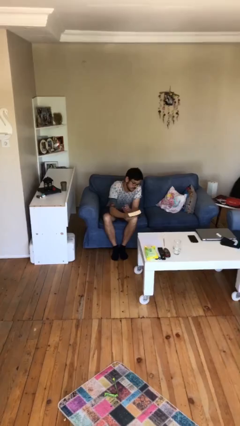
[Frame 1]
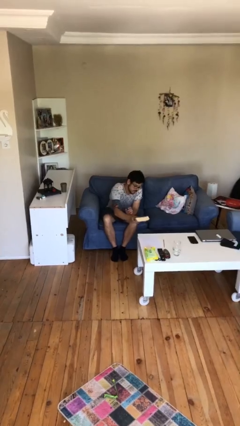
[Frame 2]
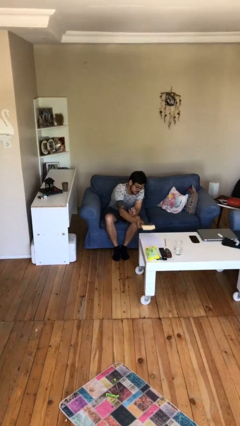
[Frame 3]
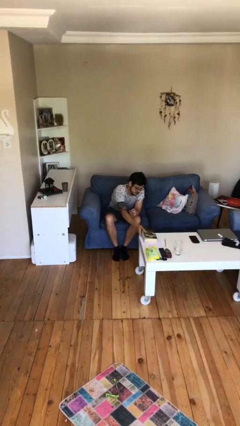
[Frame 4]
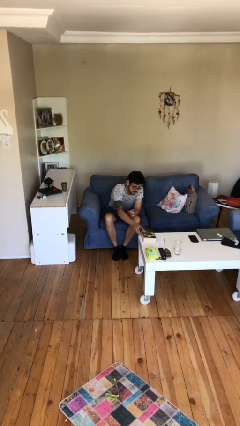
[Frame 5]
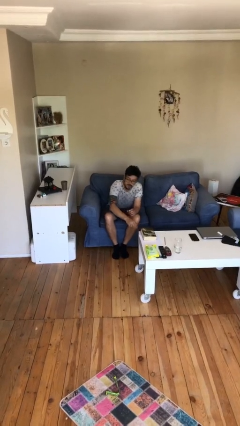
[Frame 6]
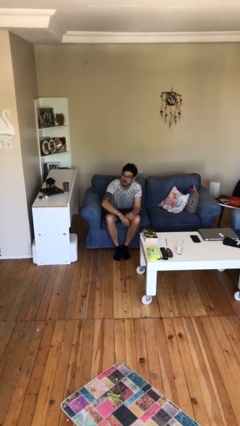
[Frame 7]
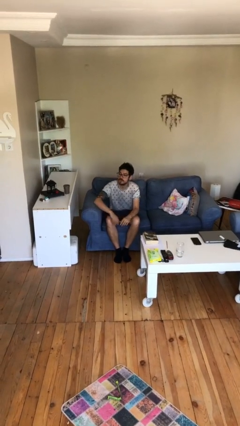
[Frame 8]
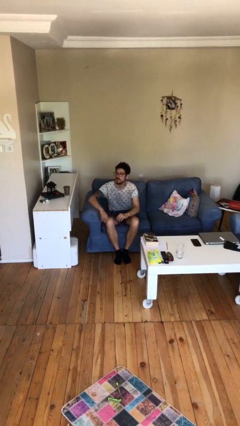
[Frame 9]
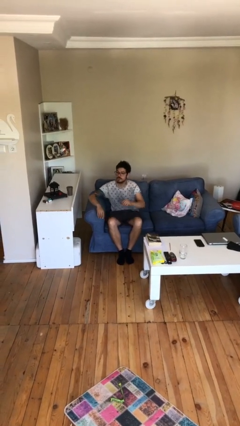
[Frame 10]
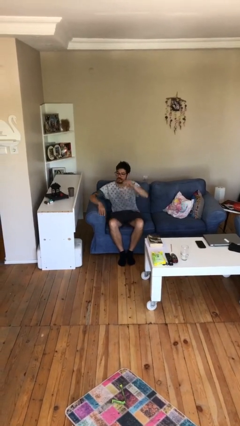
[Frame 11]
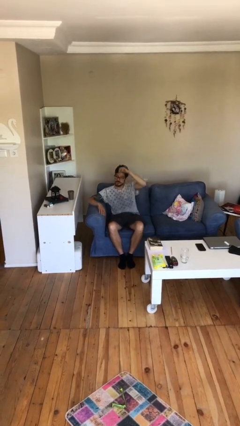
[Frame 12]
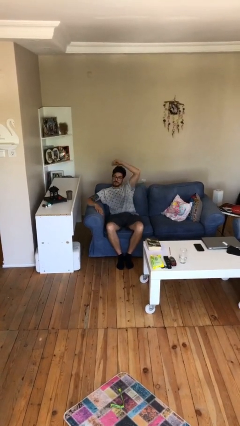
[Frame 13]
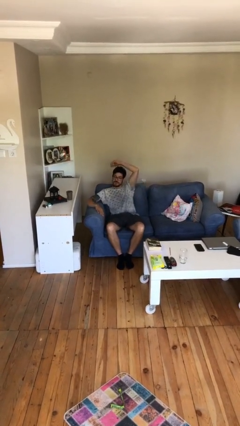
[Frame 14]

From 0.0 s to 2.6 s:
person puts down object on table

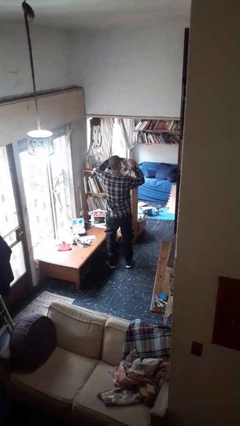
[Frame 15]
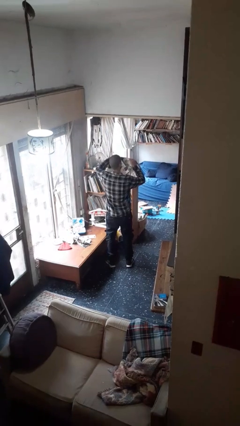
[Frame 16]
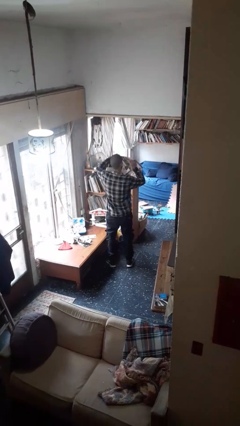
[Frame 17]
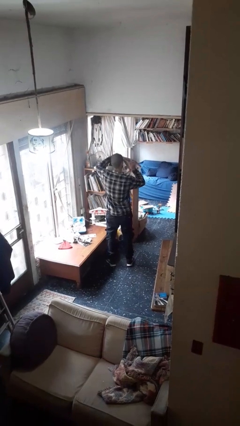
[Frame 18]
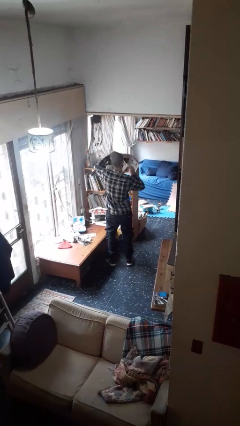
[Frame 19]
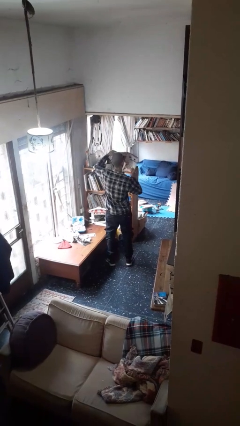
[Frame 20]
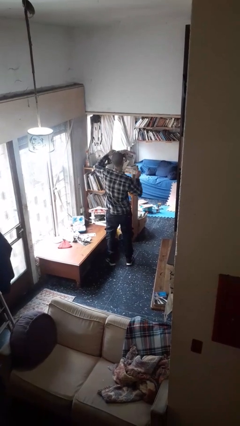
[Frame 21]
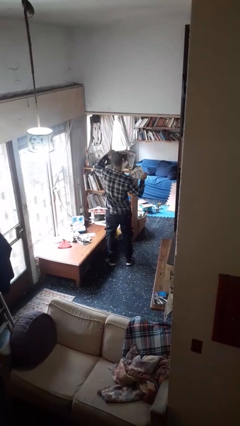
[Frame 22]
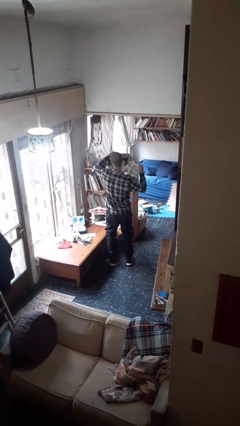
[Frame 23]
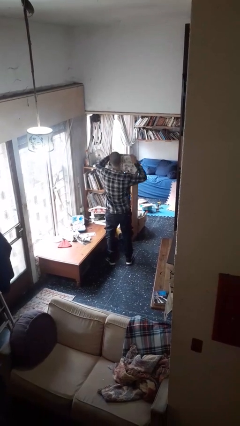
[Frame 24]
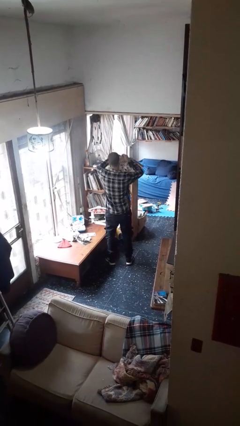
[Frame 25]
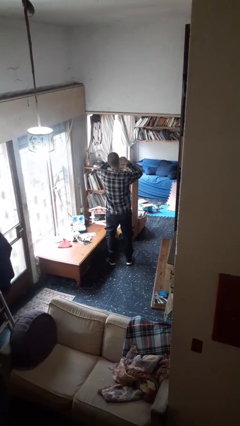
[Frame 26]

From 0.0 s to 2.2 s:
person tears paper

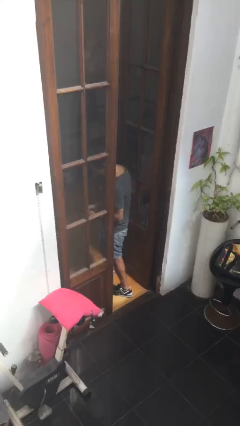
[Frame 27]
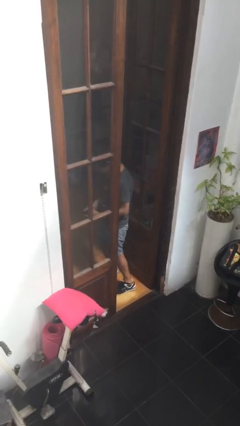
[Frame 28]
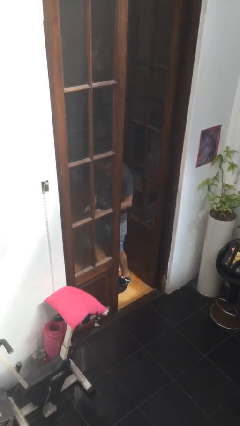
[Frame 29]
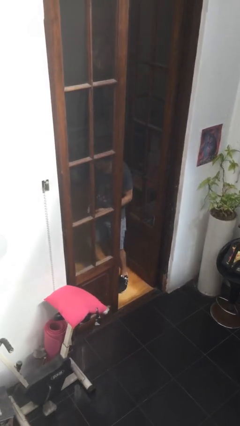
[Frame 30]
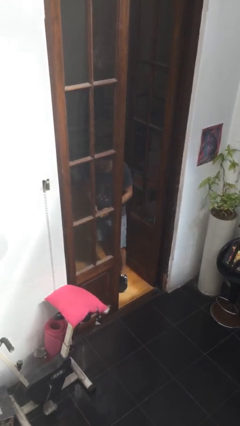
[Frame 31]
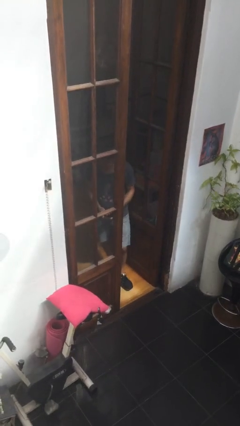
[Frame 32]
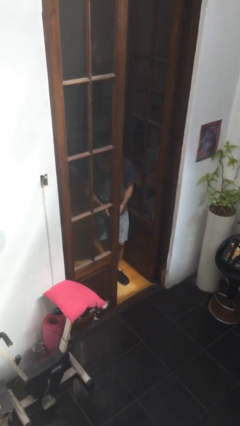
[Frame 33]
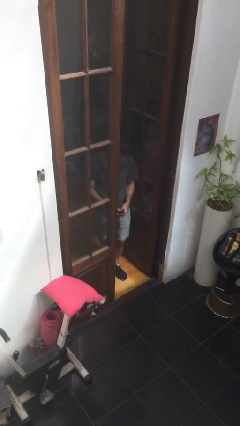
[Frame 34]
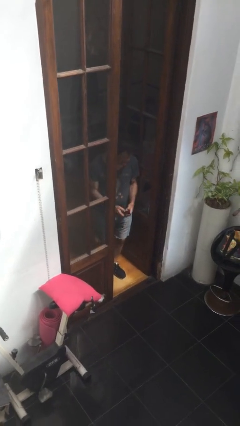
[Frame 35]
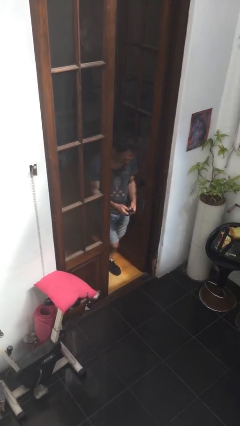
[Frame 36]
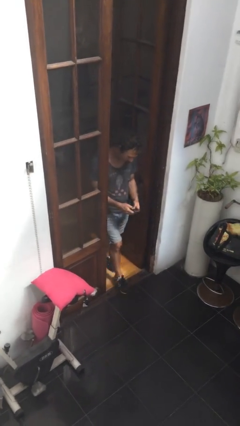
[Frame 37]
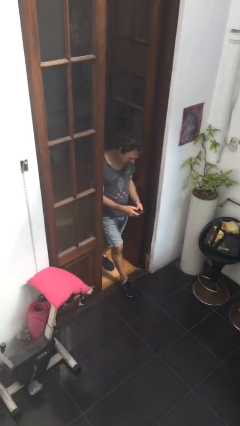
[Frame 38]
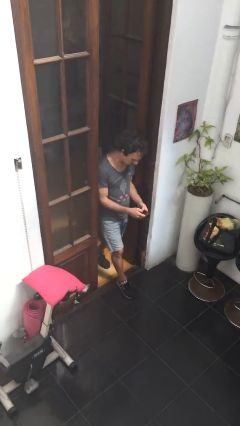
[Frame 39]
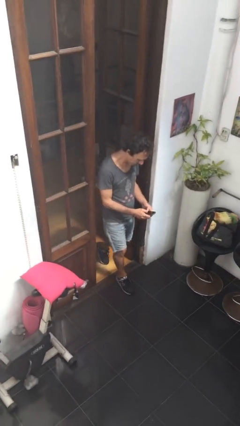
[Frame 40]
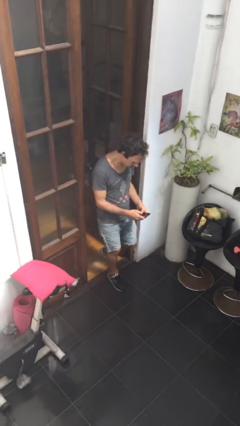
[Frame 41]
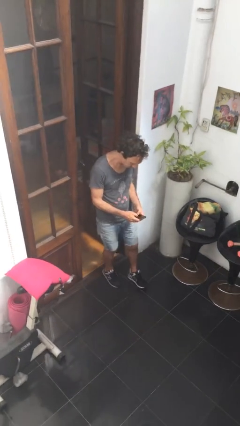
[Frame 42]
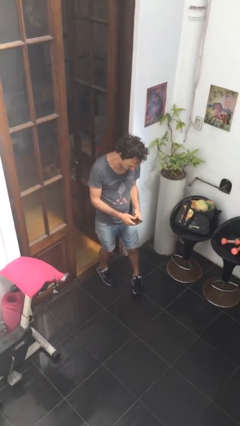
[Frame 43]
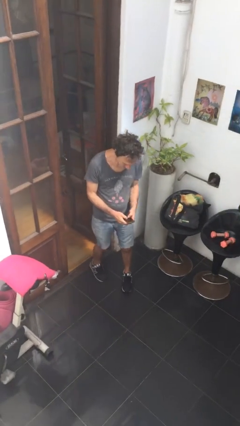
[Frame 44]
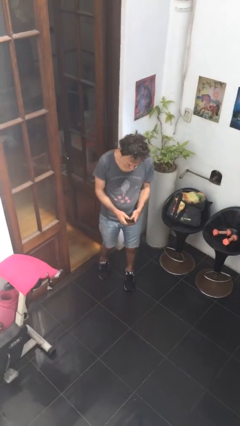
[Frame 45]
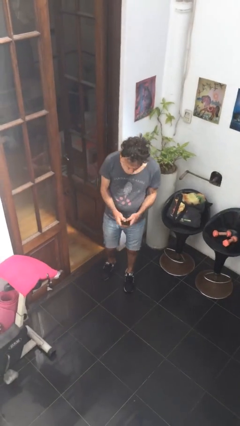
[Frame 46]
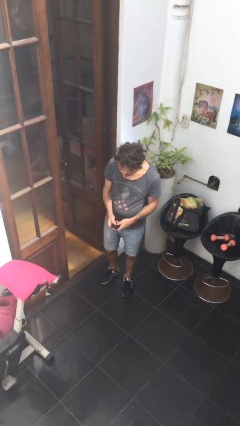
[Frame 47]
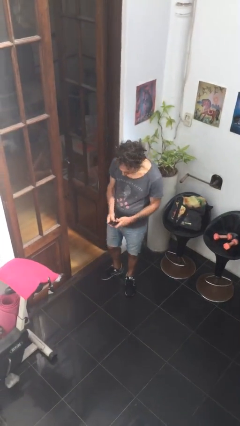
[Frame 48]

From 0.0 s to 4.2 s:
person enters scene through structure

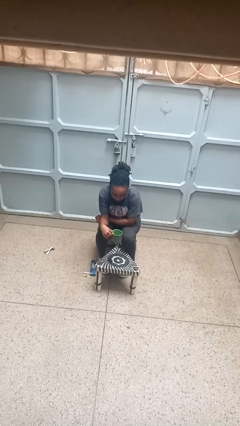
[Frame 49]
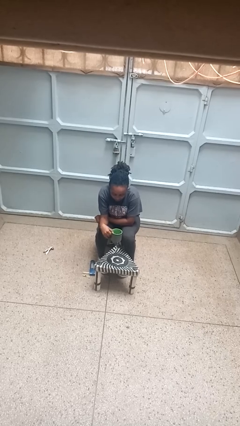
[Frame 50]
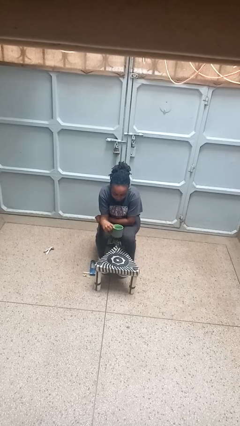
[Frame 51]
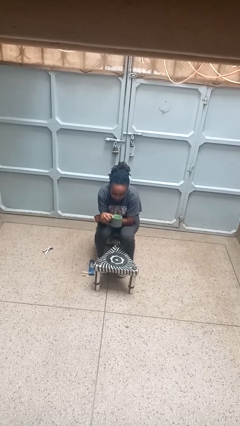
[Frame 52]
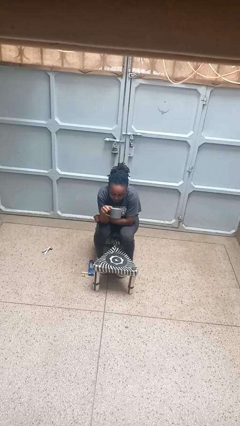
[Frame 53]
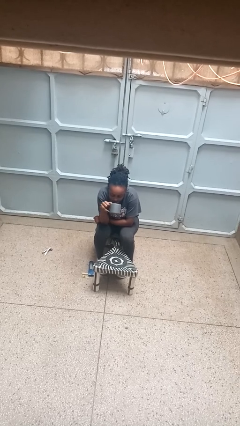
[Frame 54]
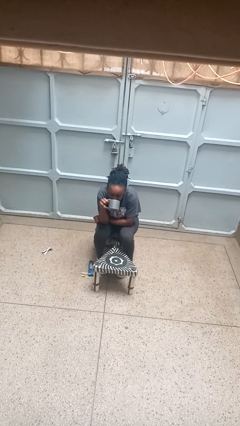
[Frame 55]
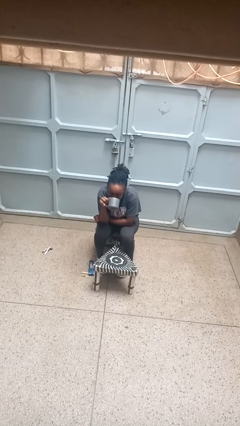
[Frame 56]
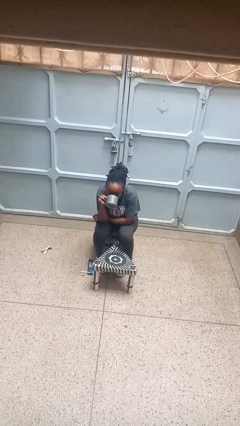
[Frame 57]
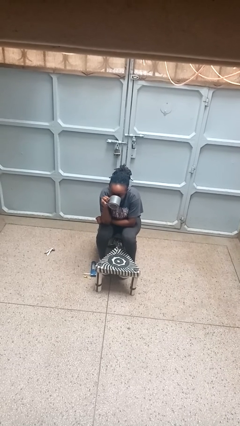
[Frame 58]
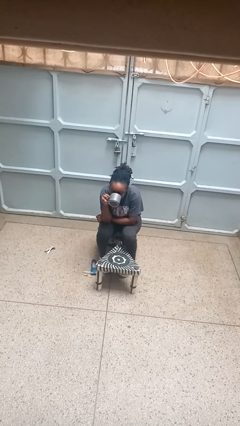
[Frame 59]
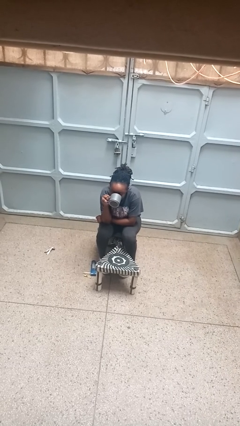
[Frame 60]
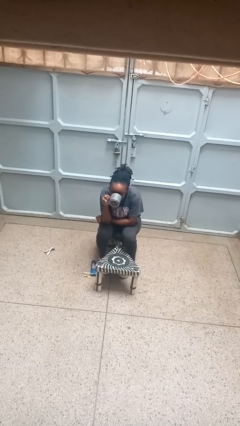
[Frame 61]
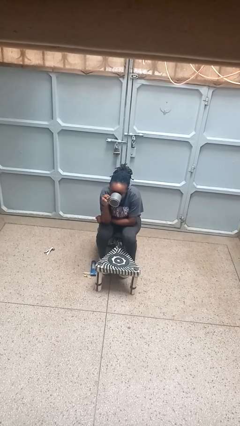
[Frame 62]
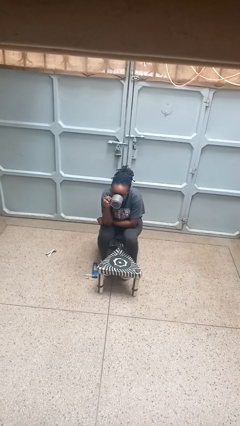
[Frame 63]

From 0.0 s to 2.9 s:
person drinks from mug

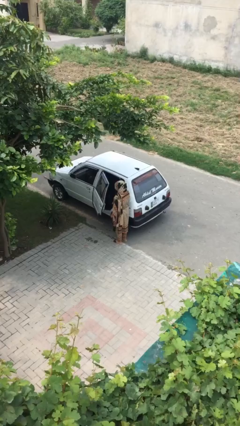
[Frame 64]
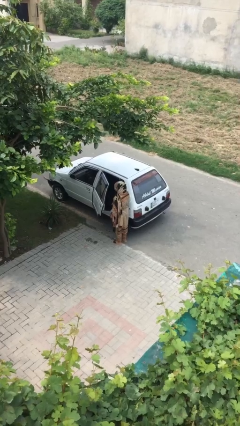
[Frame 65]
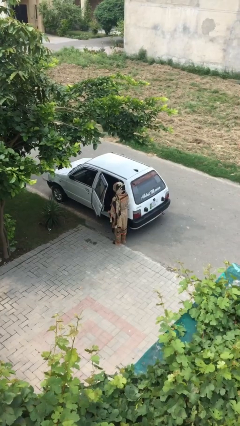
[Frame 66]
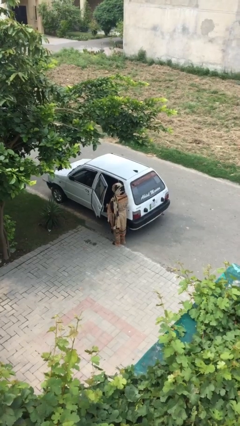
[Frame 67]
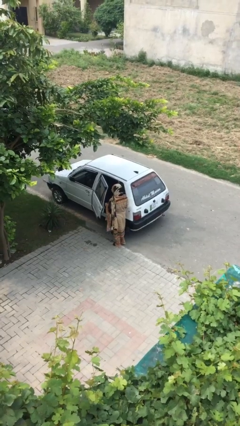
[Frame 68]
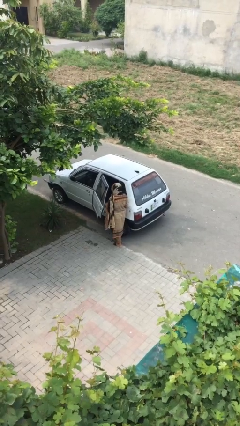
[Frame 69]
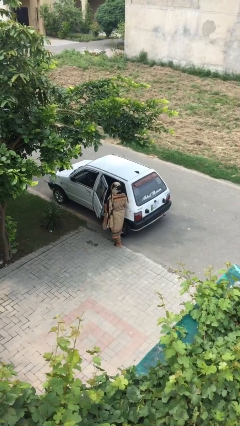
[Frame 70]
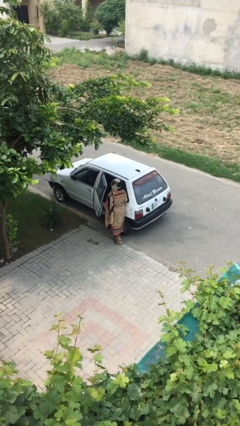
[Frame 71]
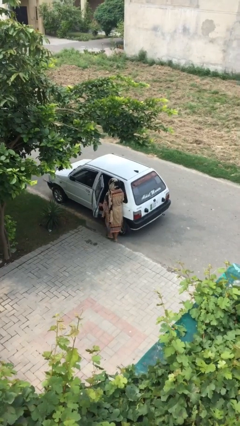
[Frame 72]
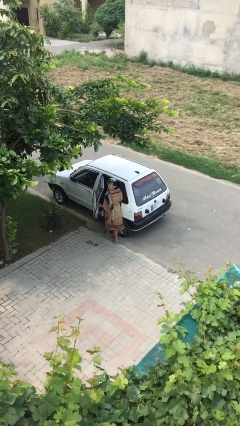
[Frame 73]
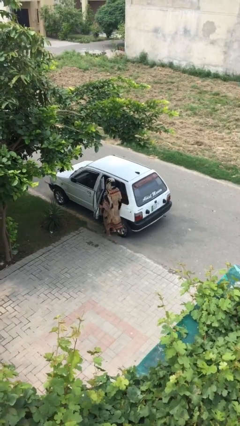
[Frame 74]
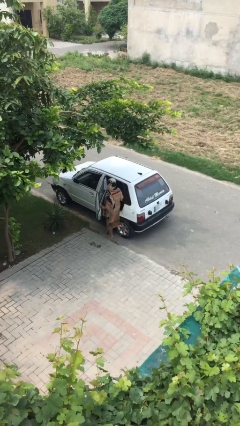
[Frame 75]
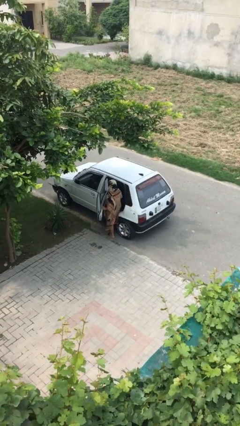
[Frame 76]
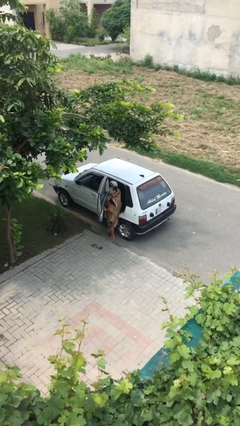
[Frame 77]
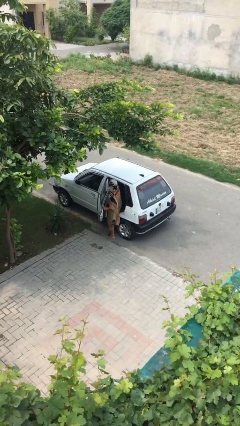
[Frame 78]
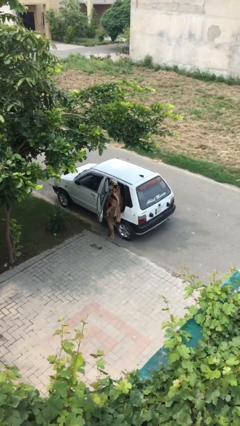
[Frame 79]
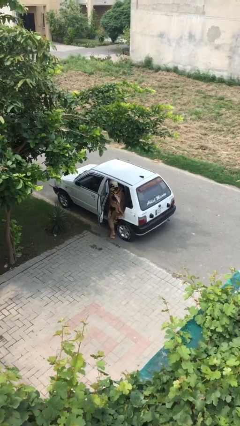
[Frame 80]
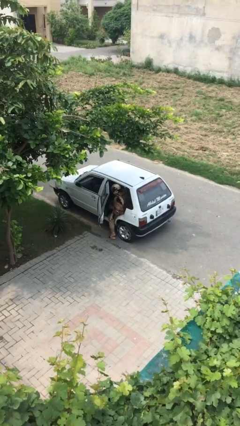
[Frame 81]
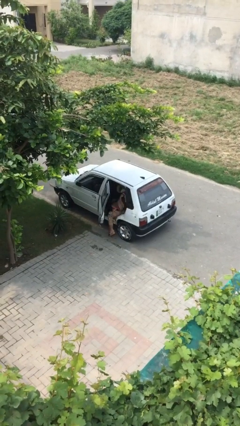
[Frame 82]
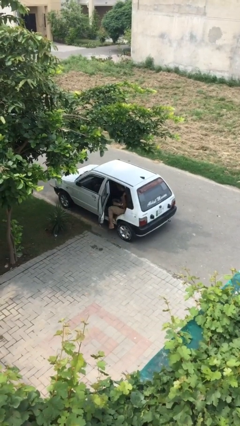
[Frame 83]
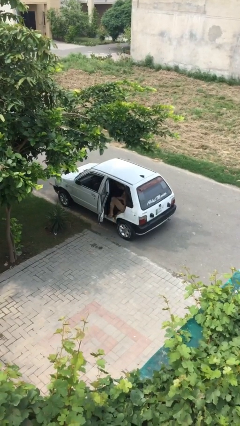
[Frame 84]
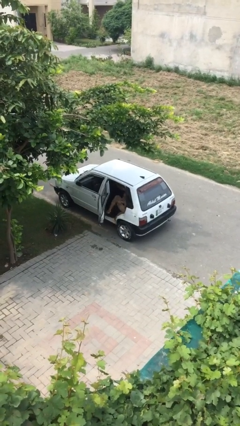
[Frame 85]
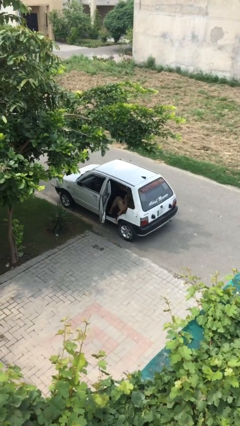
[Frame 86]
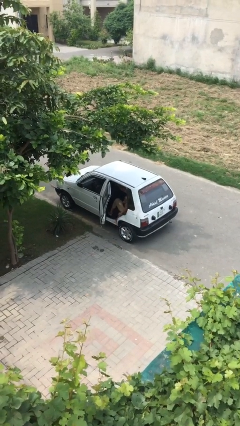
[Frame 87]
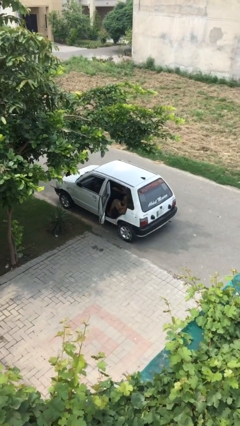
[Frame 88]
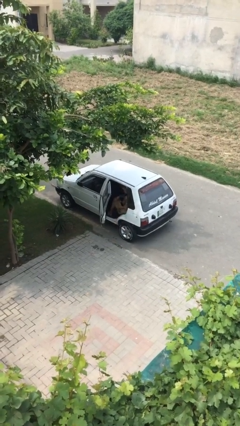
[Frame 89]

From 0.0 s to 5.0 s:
person enters car

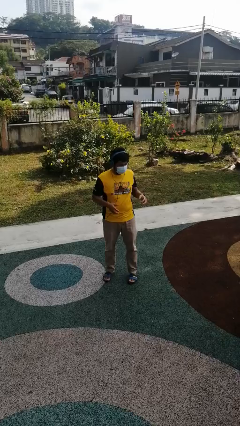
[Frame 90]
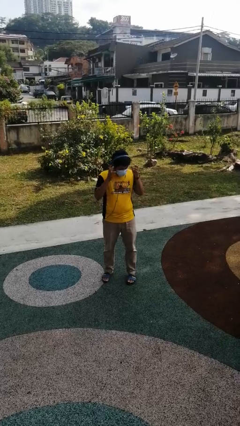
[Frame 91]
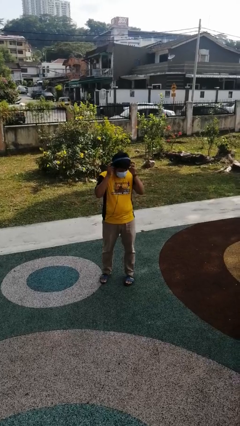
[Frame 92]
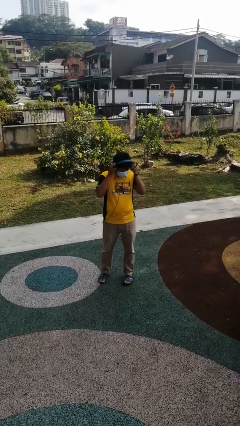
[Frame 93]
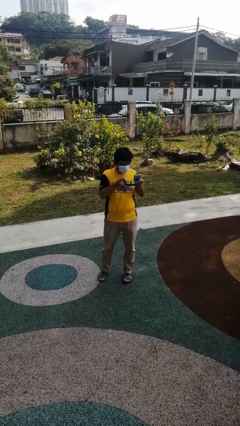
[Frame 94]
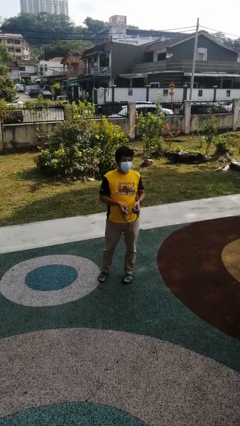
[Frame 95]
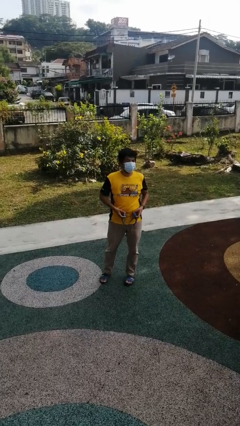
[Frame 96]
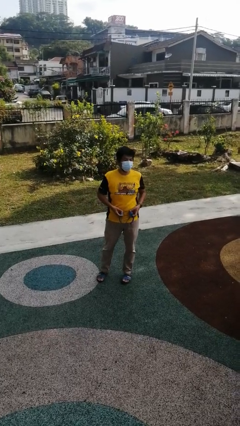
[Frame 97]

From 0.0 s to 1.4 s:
person takes off headphones
